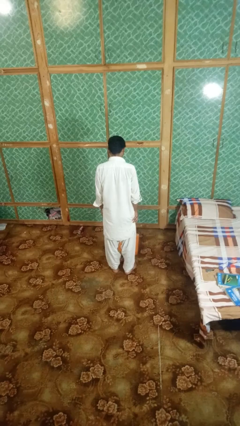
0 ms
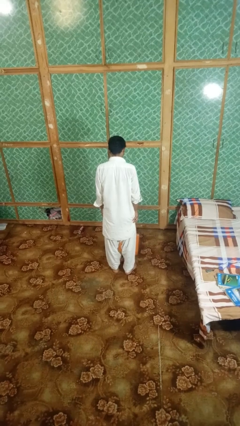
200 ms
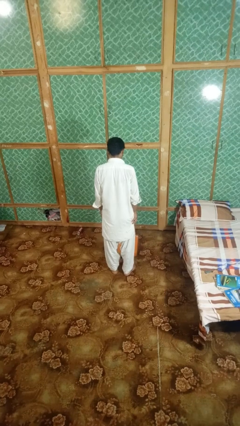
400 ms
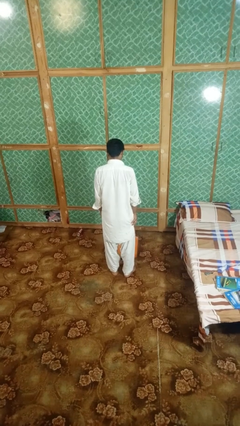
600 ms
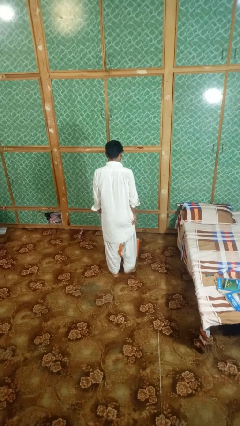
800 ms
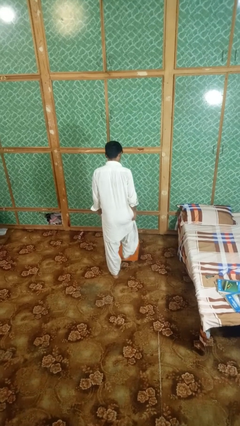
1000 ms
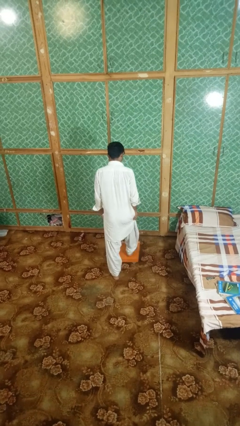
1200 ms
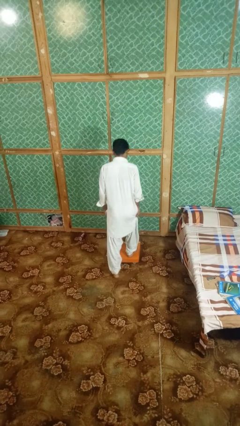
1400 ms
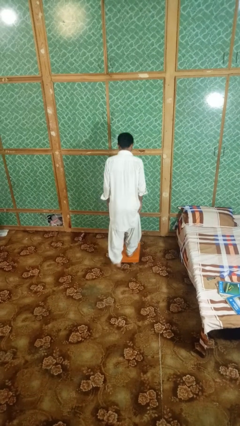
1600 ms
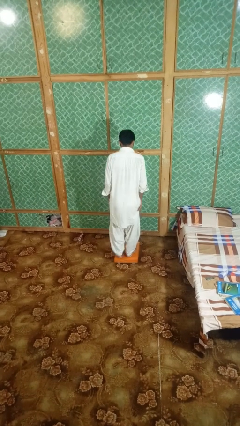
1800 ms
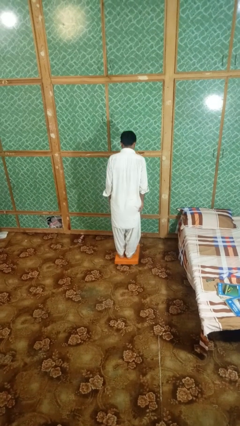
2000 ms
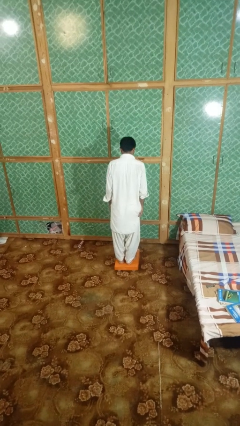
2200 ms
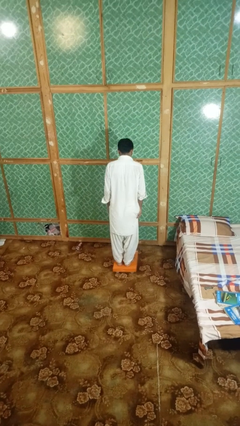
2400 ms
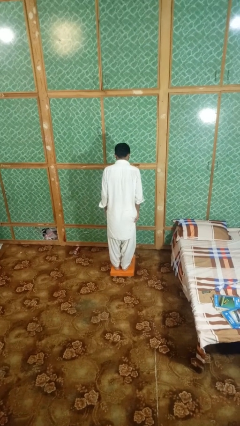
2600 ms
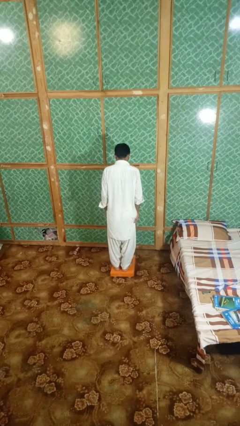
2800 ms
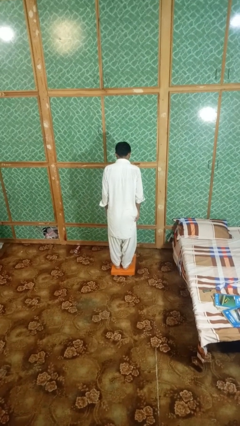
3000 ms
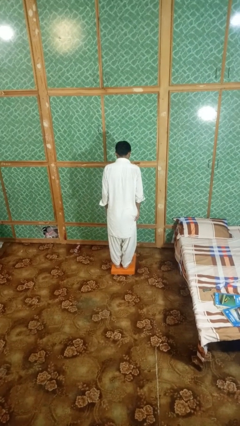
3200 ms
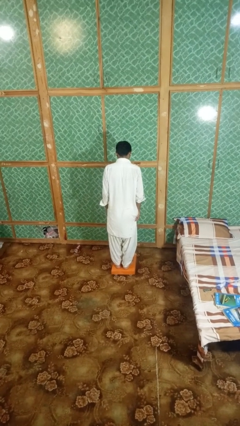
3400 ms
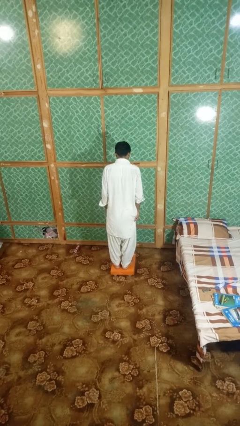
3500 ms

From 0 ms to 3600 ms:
person uses bodyweight scale

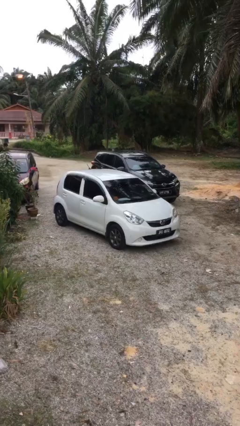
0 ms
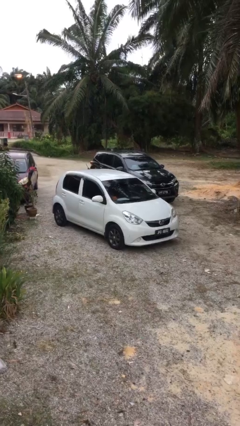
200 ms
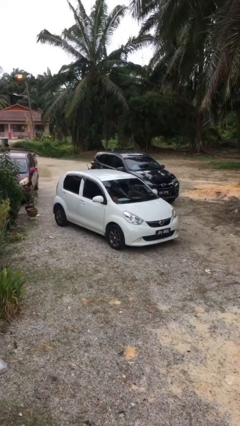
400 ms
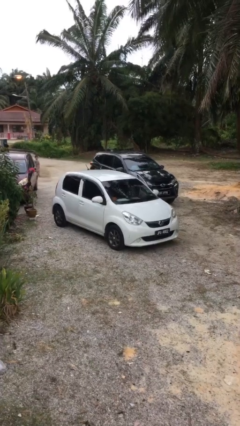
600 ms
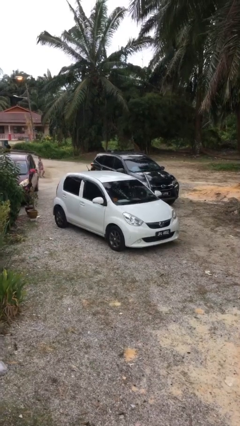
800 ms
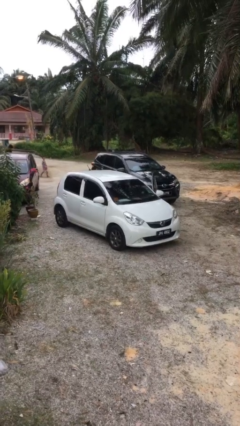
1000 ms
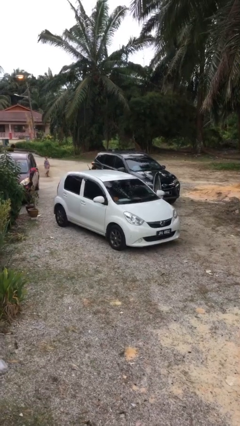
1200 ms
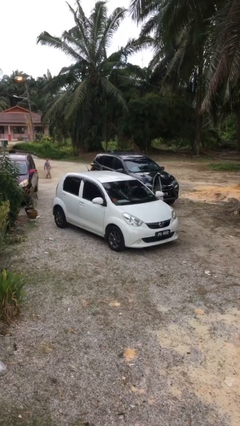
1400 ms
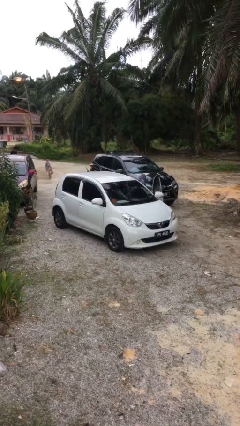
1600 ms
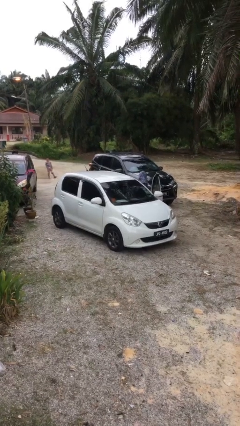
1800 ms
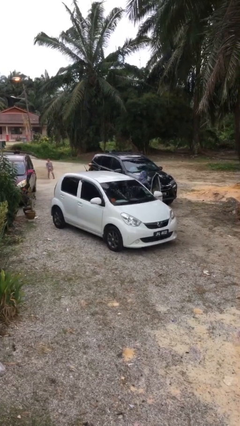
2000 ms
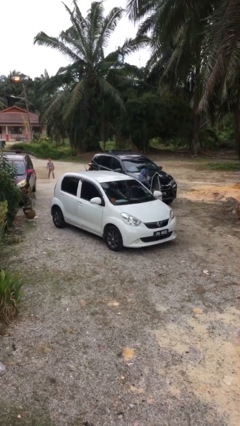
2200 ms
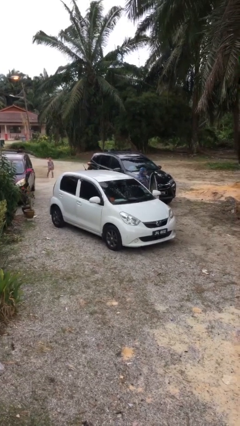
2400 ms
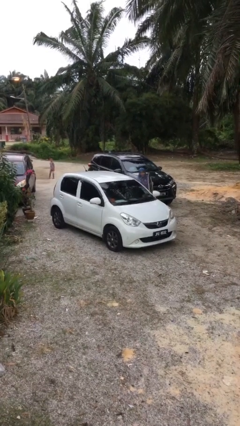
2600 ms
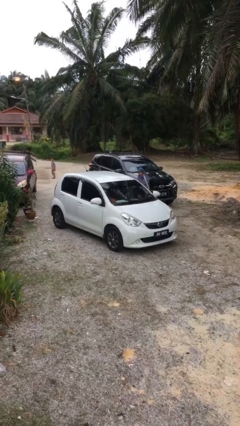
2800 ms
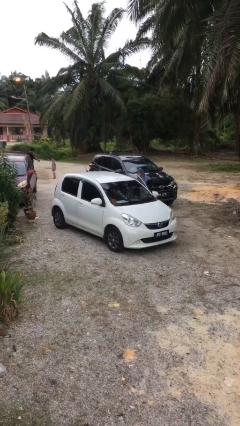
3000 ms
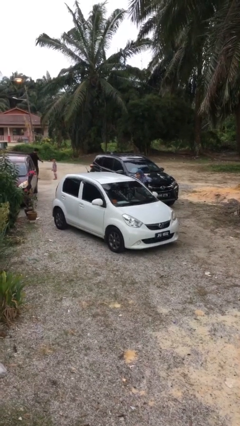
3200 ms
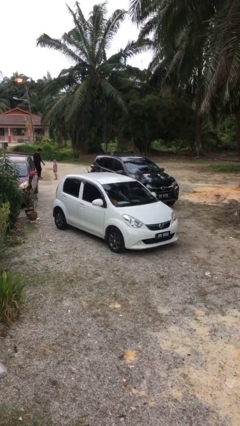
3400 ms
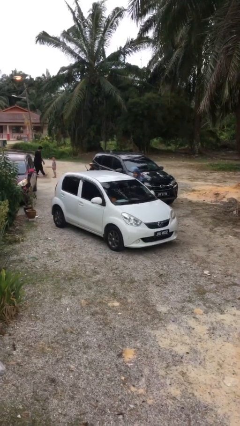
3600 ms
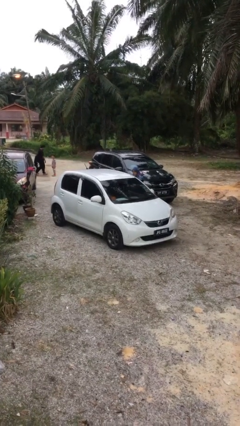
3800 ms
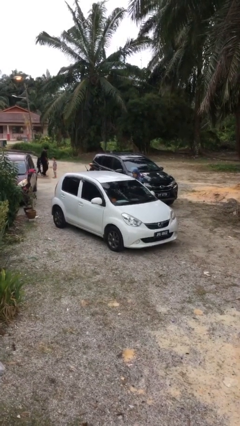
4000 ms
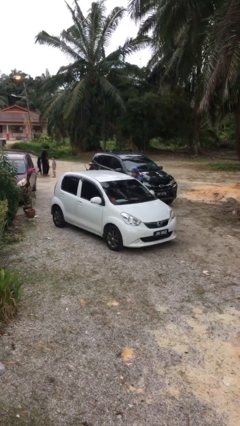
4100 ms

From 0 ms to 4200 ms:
car picks up person

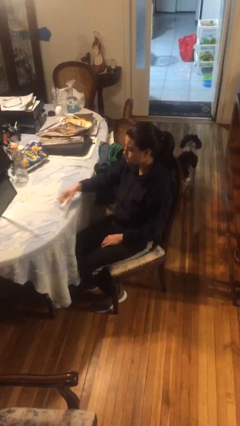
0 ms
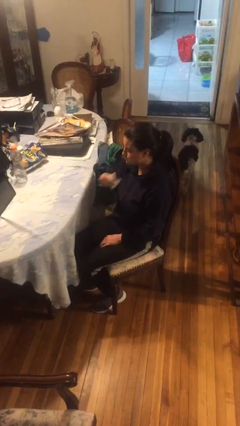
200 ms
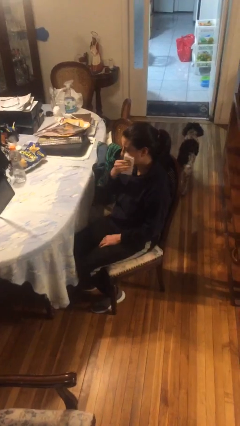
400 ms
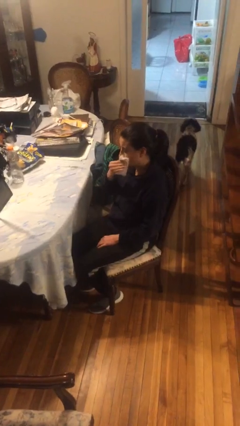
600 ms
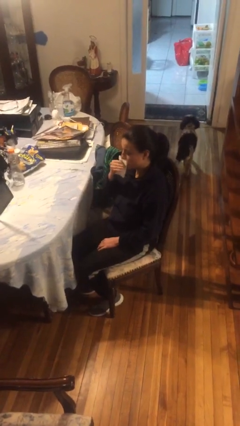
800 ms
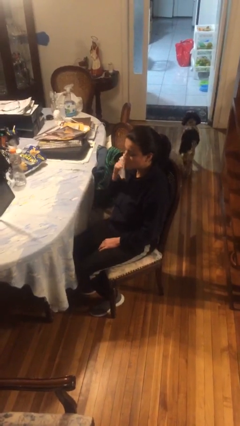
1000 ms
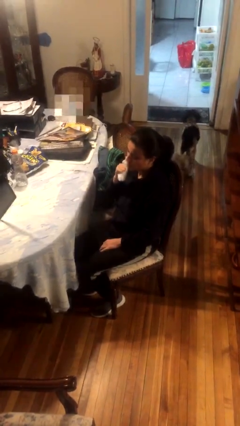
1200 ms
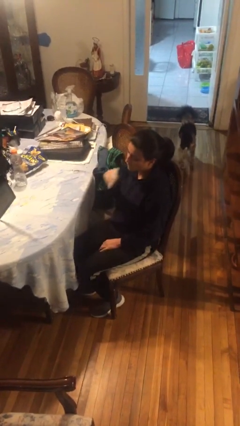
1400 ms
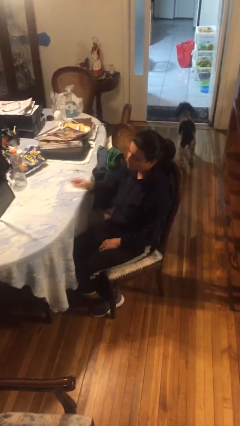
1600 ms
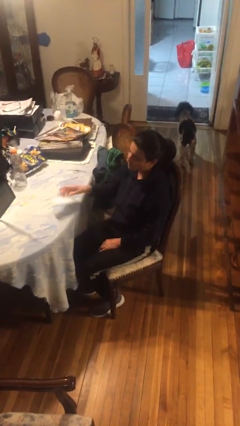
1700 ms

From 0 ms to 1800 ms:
person wipes mouth with napkin

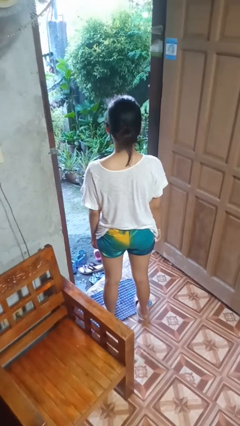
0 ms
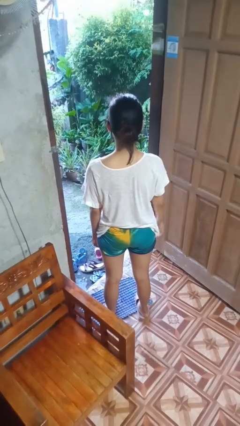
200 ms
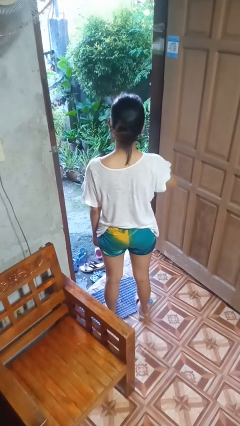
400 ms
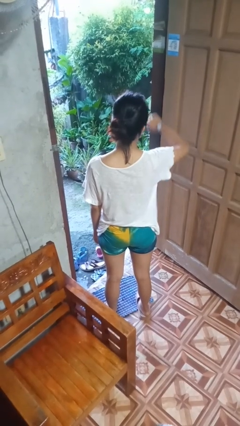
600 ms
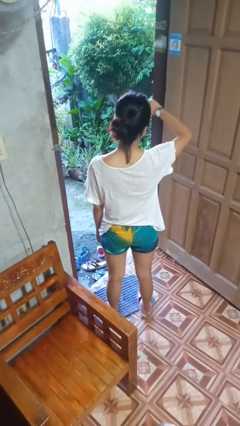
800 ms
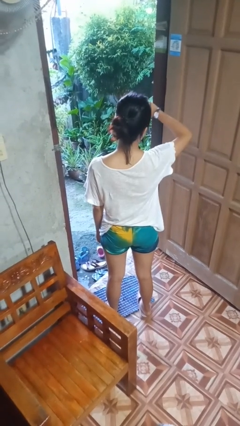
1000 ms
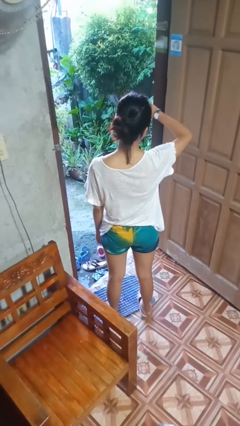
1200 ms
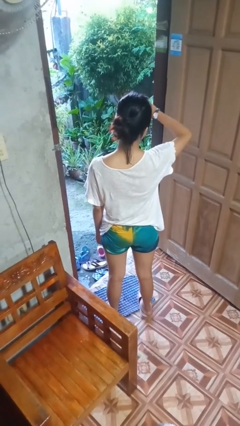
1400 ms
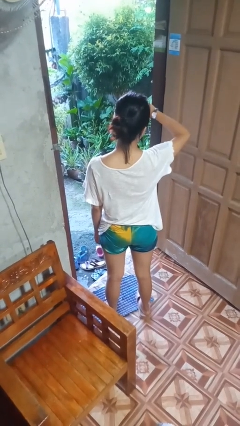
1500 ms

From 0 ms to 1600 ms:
person looks at wristwatch

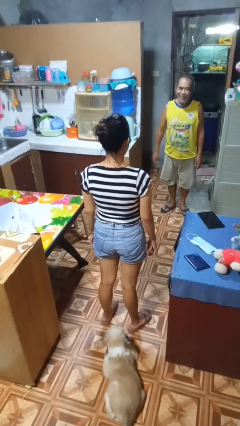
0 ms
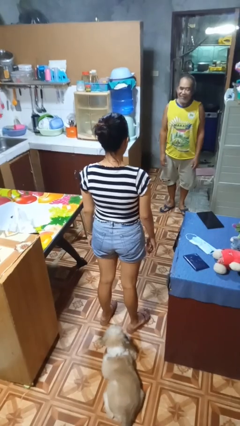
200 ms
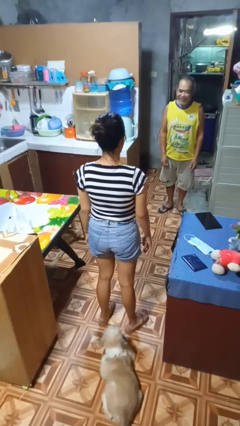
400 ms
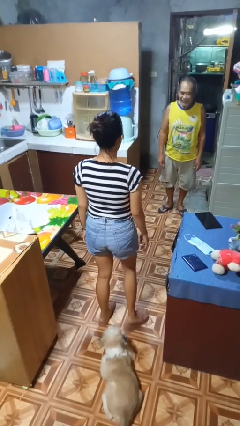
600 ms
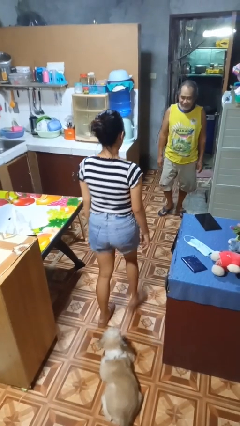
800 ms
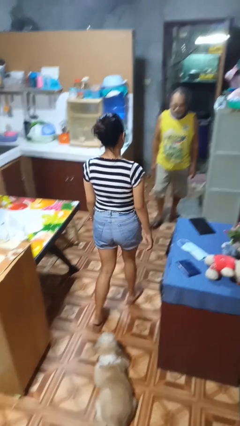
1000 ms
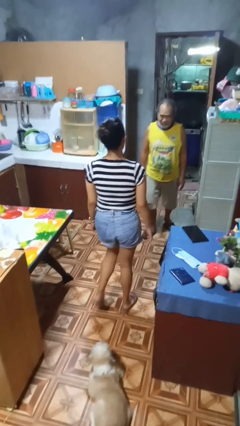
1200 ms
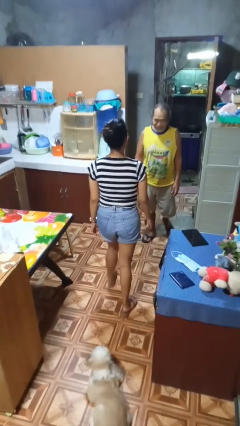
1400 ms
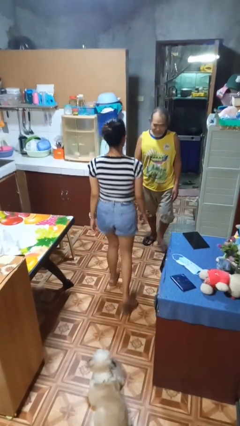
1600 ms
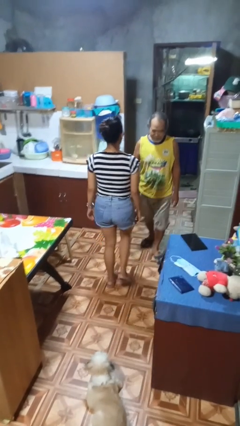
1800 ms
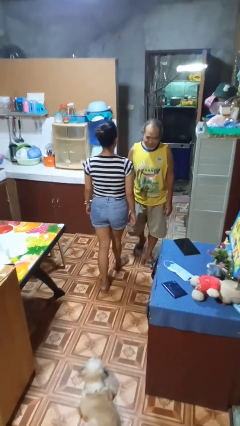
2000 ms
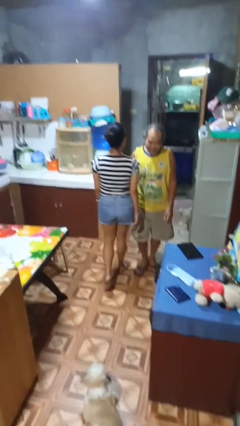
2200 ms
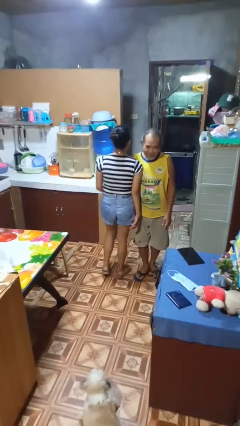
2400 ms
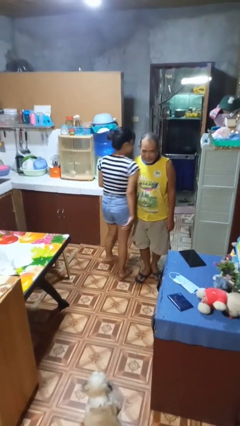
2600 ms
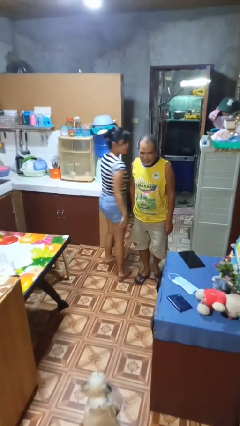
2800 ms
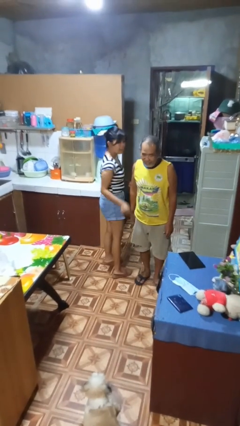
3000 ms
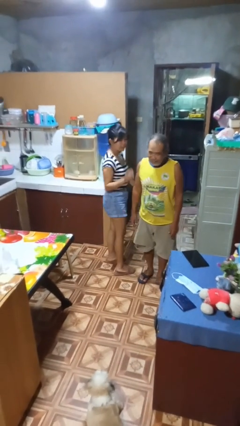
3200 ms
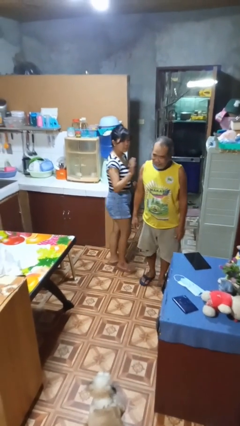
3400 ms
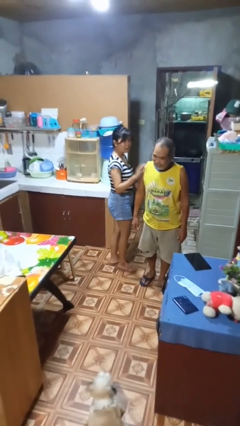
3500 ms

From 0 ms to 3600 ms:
person bumps into person

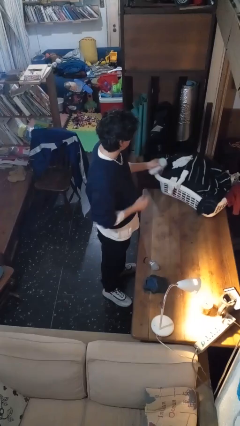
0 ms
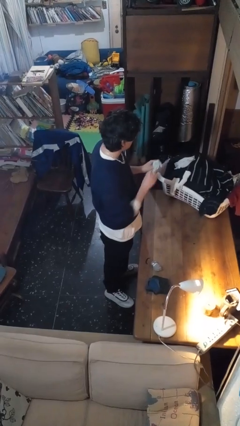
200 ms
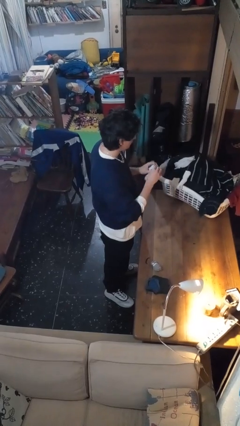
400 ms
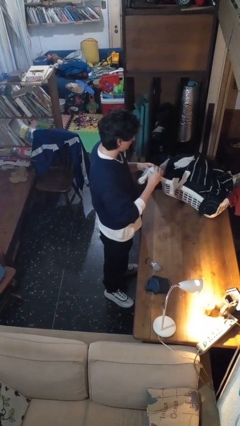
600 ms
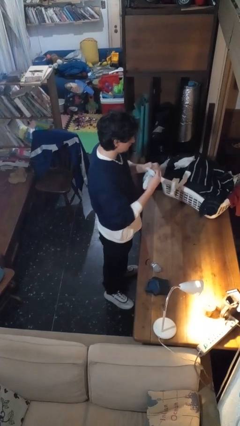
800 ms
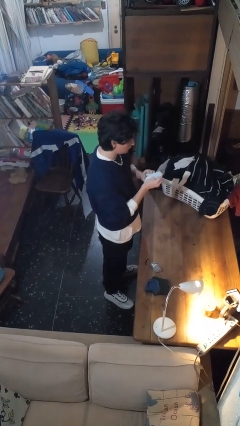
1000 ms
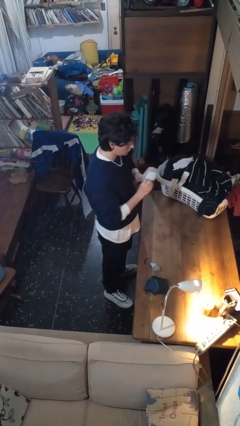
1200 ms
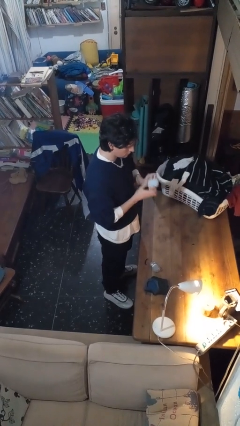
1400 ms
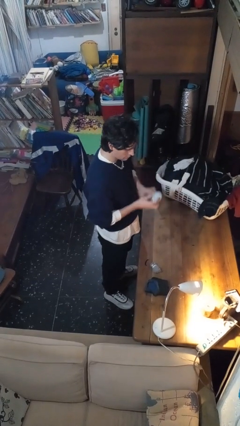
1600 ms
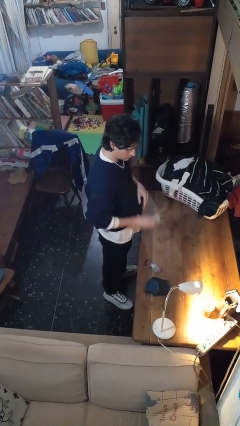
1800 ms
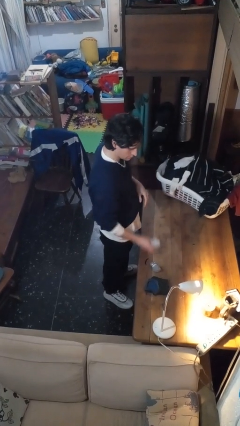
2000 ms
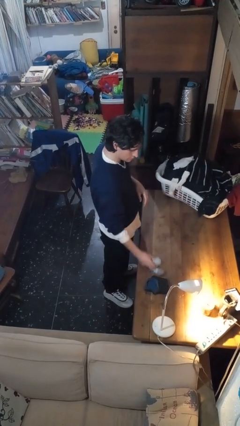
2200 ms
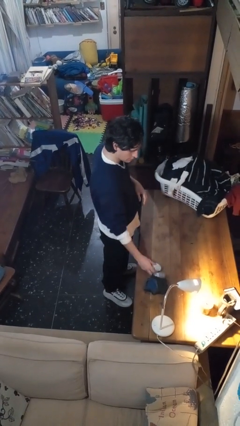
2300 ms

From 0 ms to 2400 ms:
person folds socks
